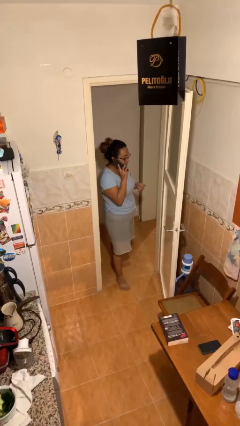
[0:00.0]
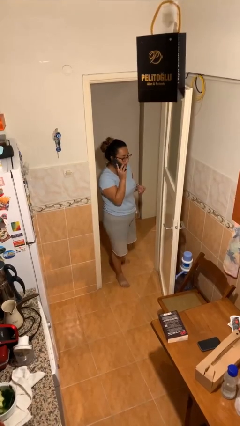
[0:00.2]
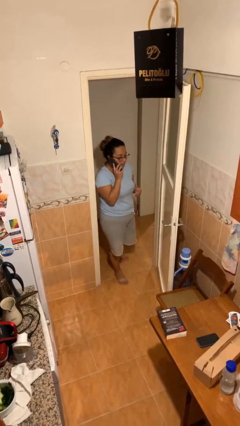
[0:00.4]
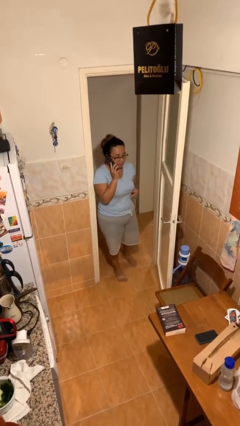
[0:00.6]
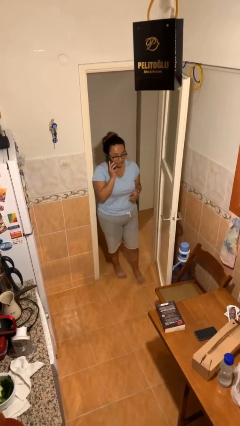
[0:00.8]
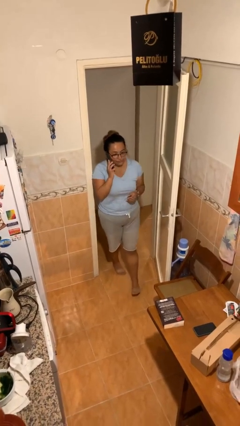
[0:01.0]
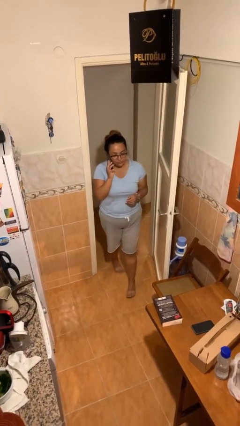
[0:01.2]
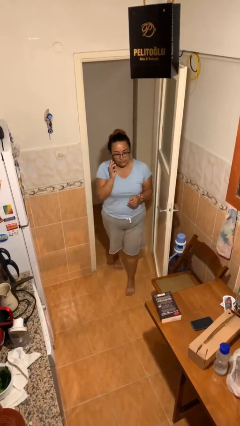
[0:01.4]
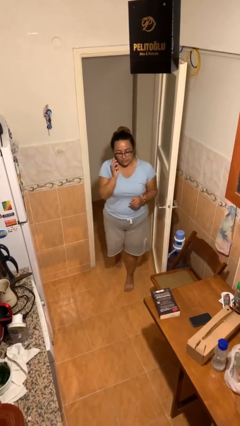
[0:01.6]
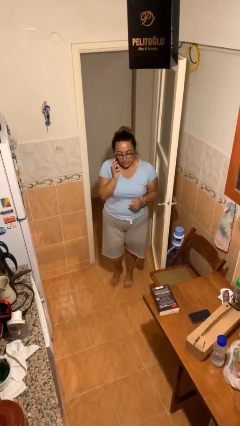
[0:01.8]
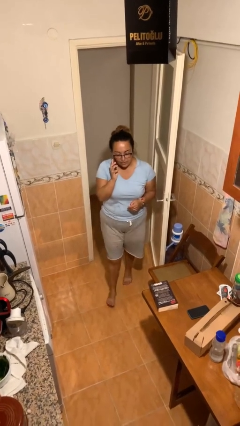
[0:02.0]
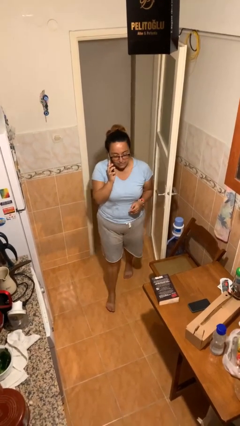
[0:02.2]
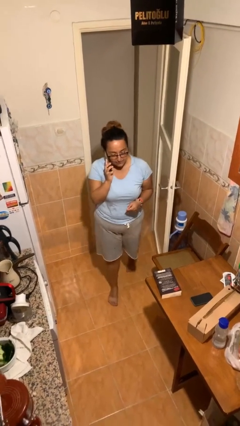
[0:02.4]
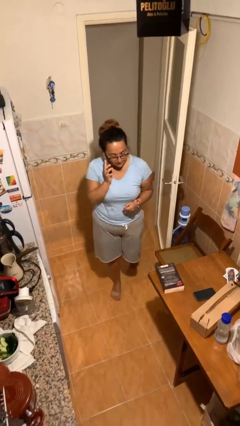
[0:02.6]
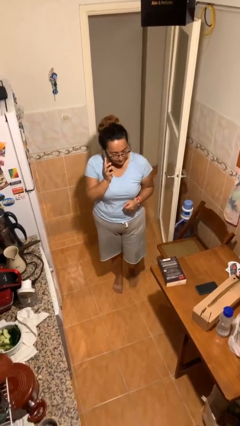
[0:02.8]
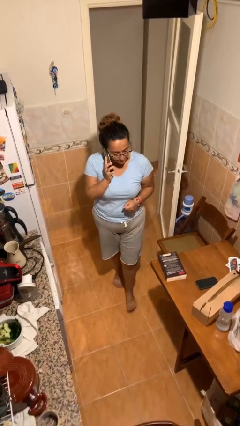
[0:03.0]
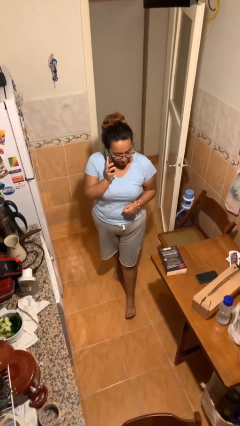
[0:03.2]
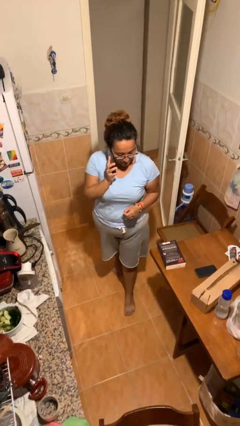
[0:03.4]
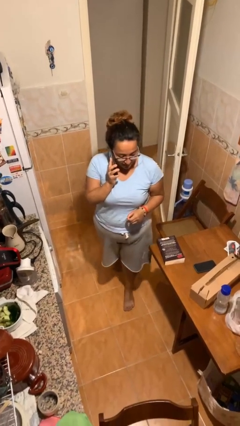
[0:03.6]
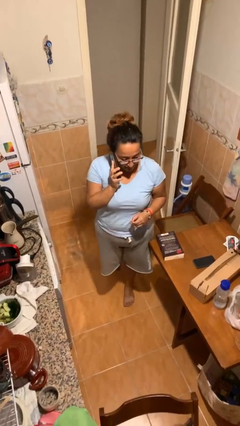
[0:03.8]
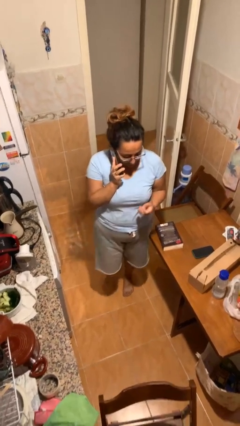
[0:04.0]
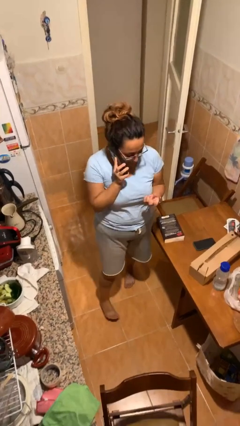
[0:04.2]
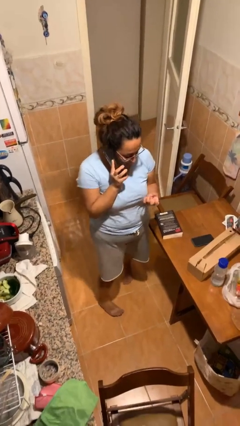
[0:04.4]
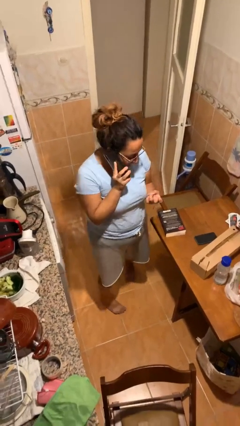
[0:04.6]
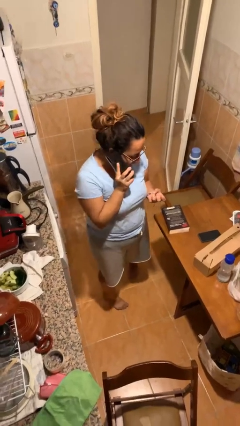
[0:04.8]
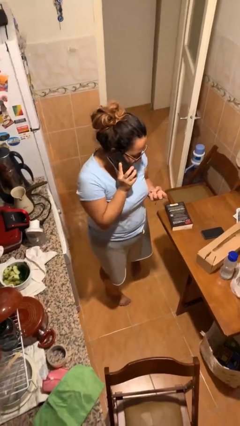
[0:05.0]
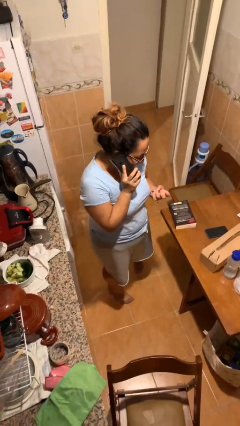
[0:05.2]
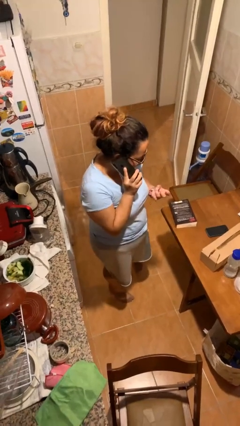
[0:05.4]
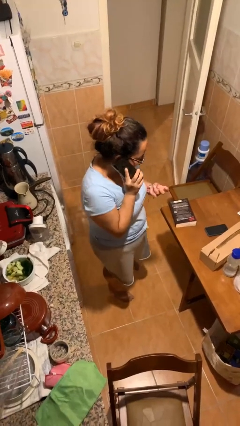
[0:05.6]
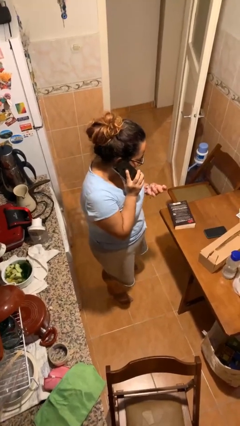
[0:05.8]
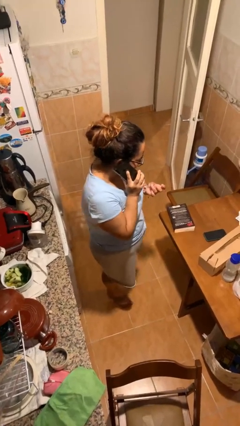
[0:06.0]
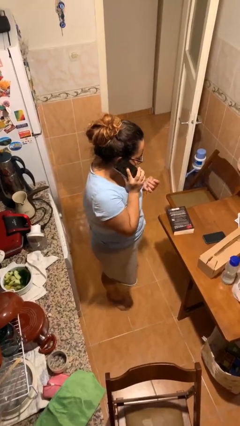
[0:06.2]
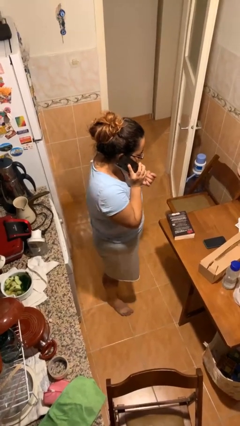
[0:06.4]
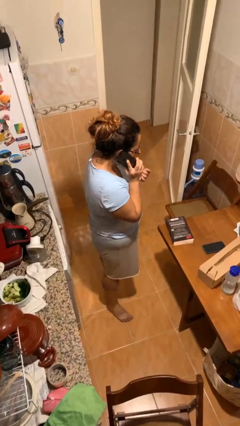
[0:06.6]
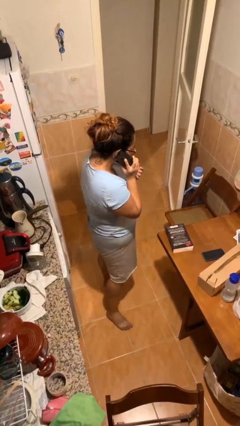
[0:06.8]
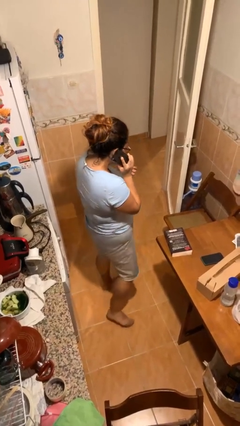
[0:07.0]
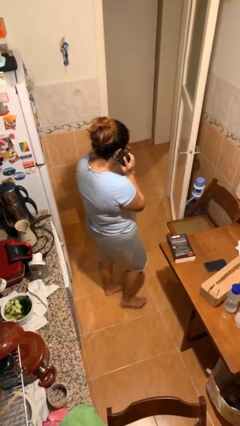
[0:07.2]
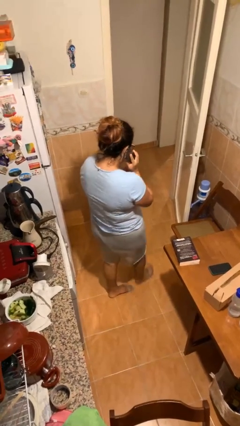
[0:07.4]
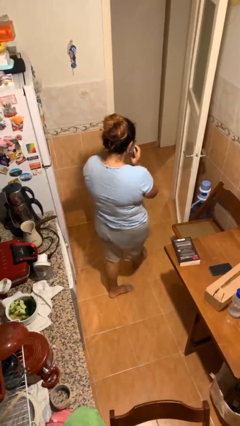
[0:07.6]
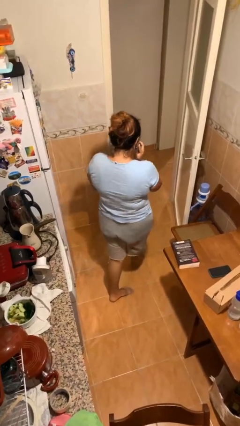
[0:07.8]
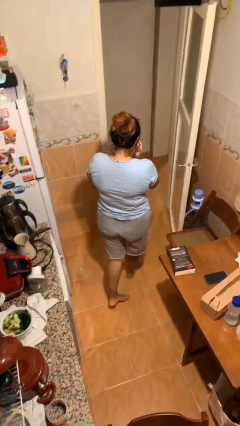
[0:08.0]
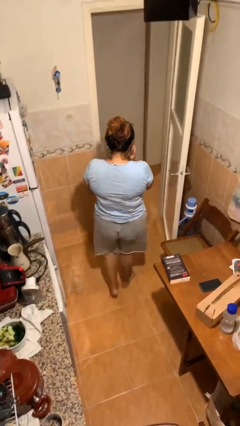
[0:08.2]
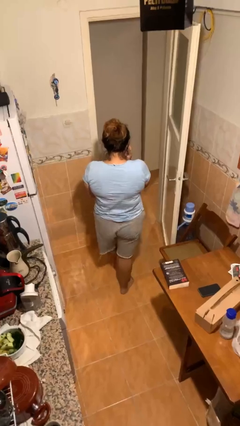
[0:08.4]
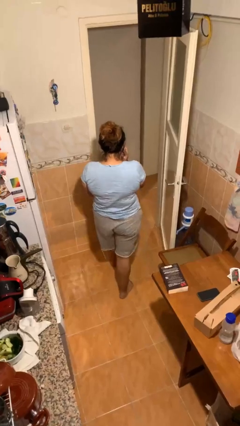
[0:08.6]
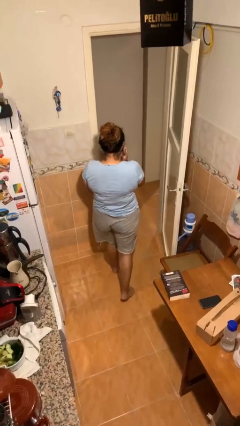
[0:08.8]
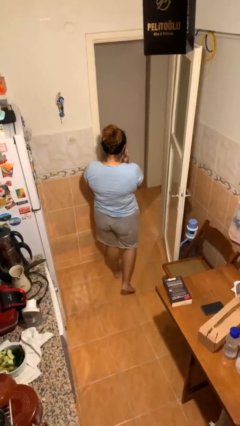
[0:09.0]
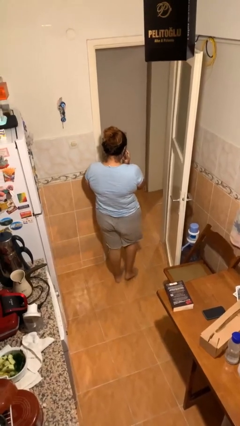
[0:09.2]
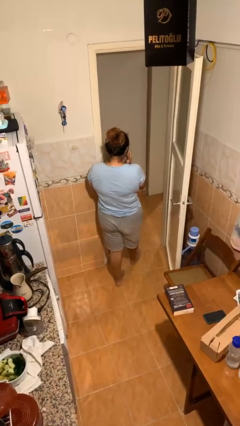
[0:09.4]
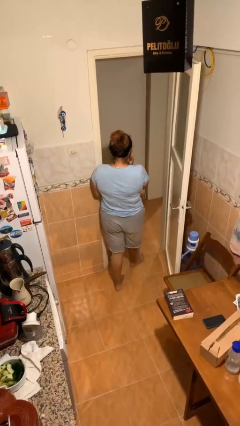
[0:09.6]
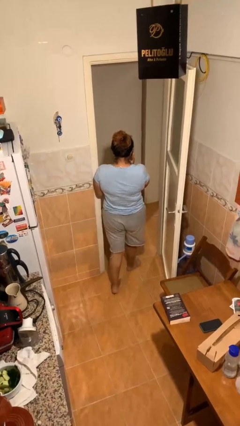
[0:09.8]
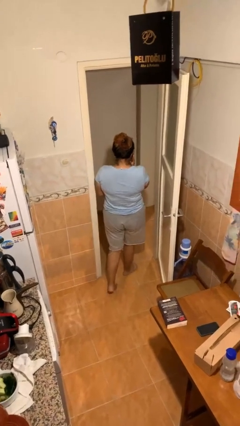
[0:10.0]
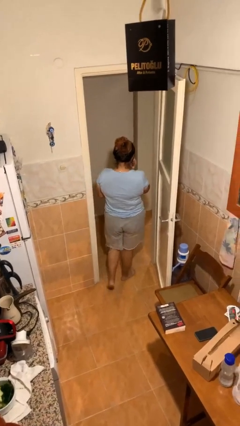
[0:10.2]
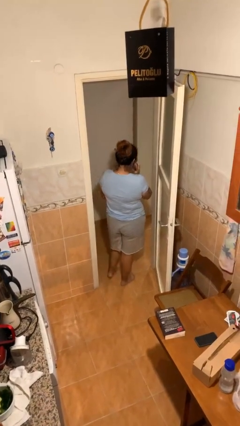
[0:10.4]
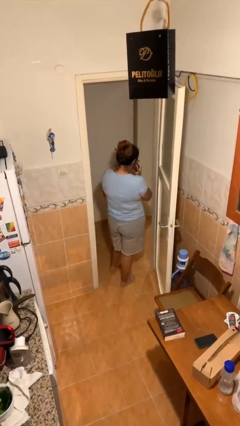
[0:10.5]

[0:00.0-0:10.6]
person talks on phone

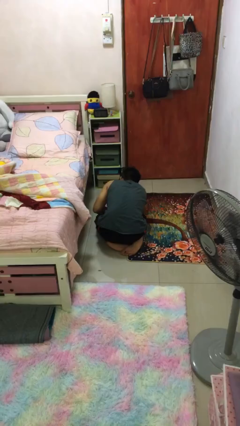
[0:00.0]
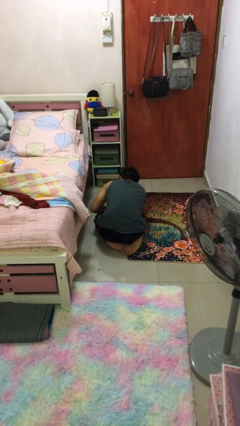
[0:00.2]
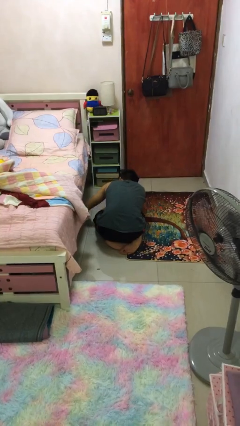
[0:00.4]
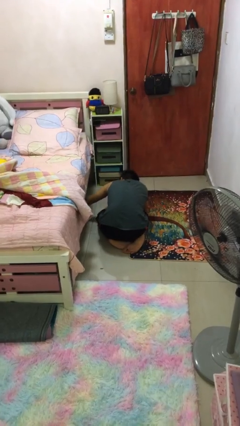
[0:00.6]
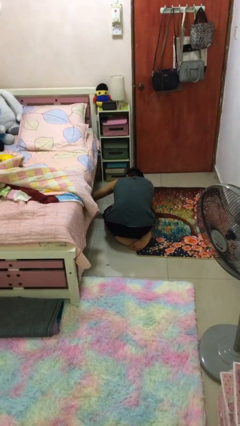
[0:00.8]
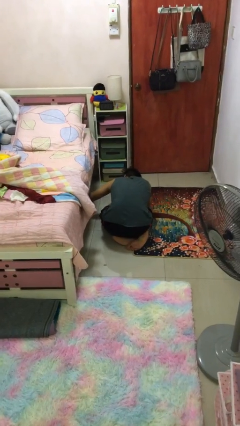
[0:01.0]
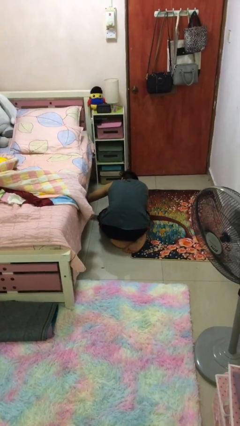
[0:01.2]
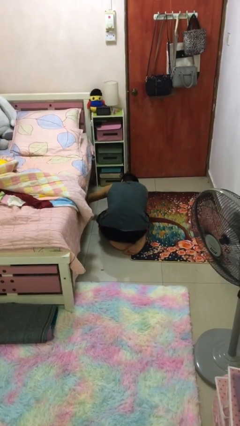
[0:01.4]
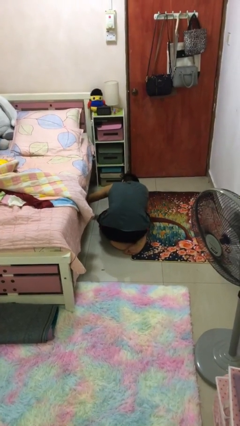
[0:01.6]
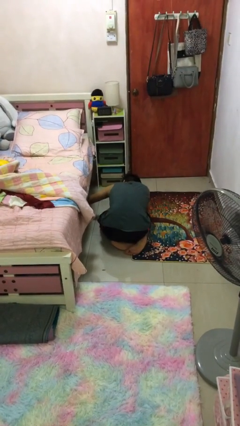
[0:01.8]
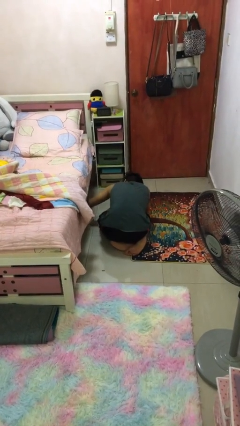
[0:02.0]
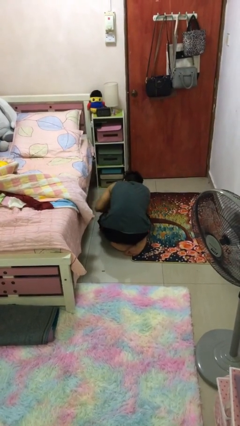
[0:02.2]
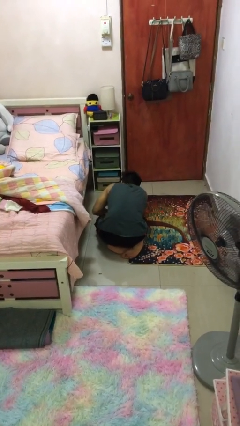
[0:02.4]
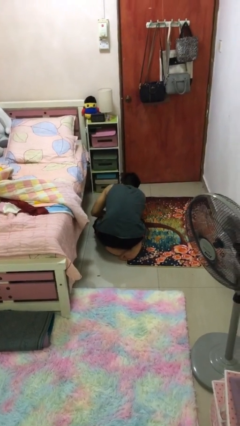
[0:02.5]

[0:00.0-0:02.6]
person searches under bed

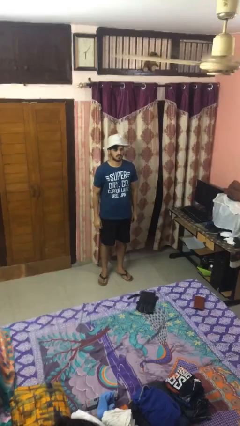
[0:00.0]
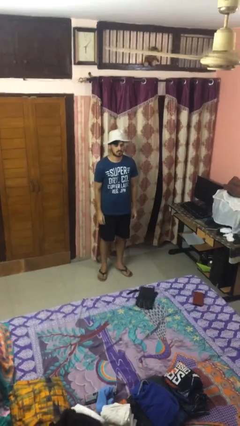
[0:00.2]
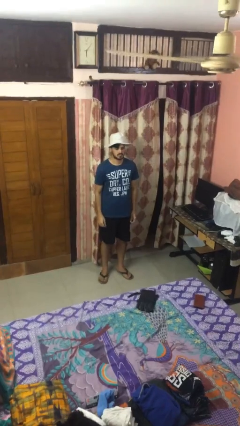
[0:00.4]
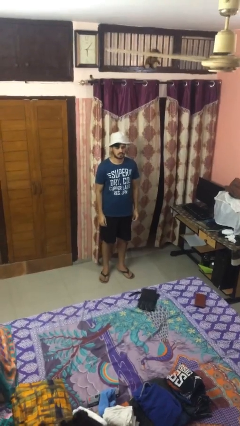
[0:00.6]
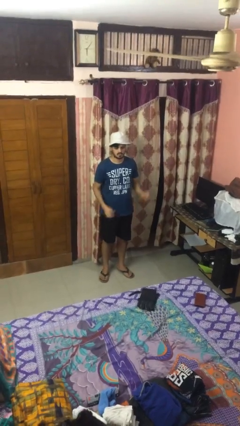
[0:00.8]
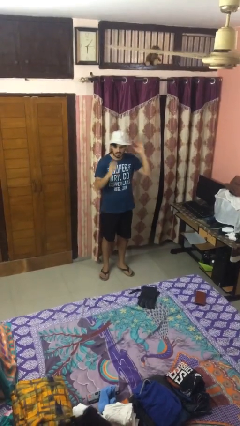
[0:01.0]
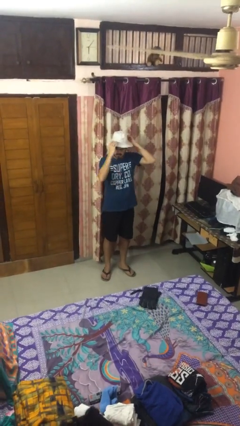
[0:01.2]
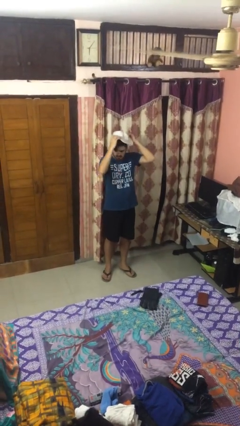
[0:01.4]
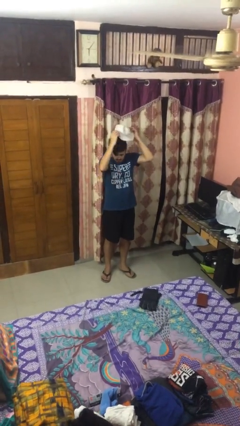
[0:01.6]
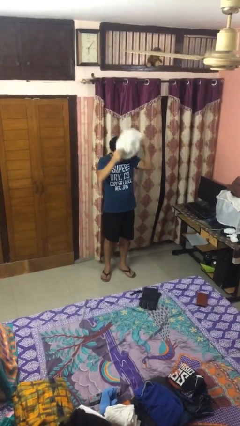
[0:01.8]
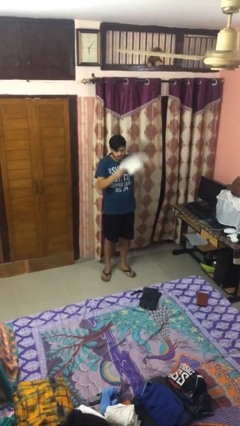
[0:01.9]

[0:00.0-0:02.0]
person takes off hat

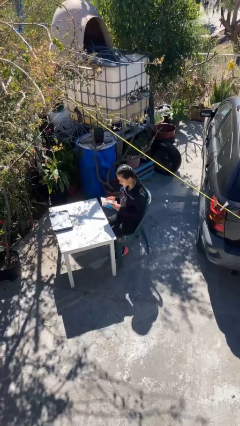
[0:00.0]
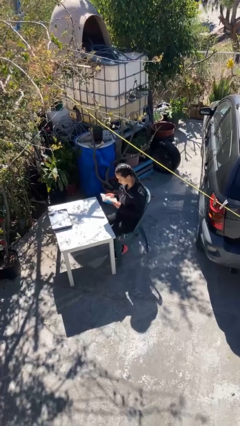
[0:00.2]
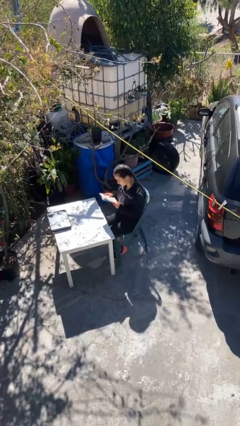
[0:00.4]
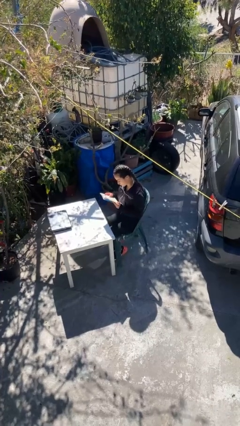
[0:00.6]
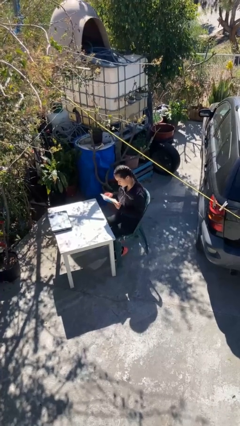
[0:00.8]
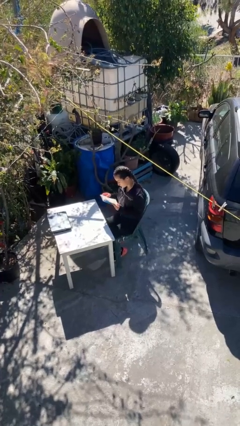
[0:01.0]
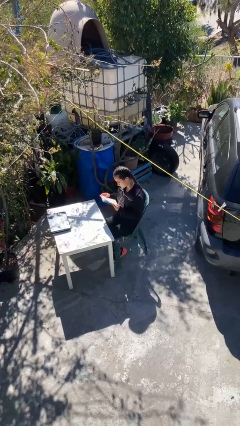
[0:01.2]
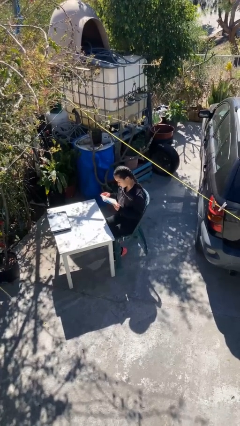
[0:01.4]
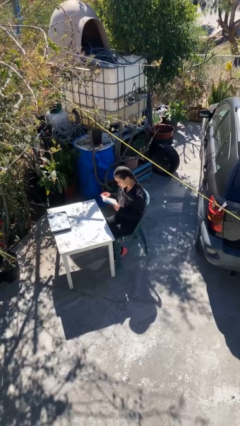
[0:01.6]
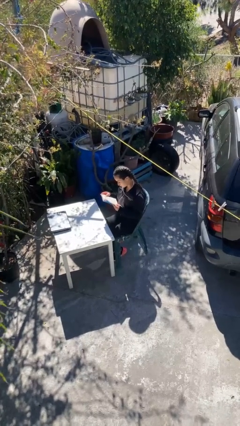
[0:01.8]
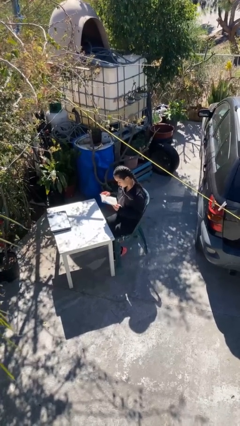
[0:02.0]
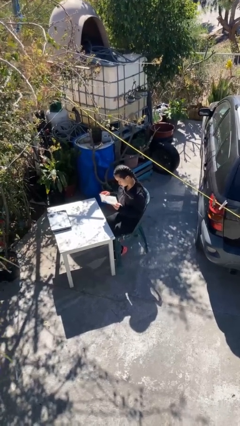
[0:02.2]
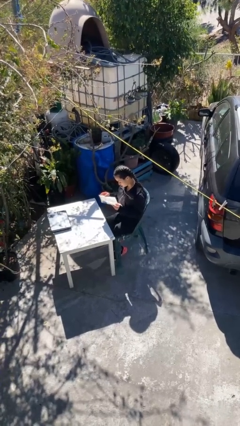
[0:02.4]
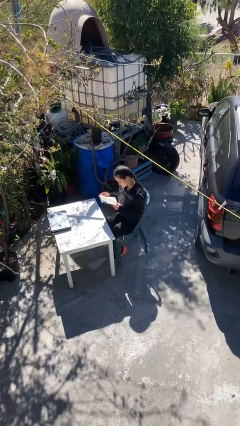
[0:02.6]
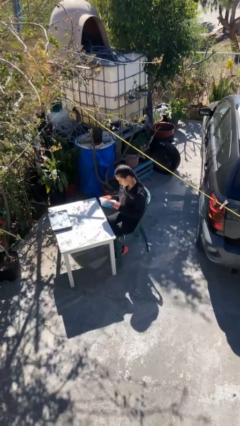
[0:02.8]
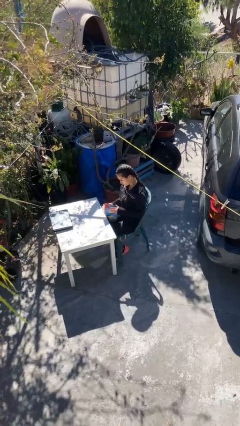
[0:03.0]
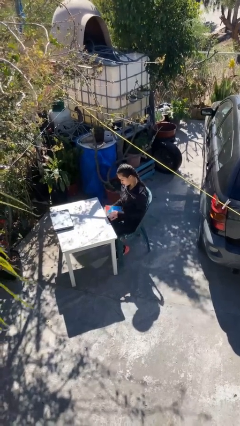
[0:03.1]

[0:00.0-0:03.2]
person reads document
